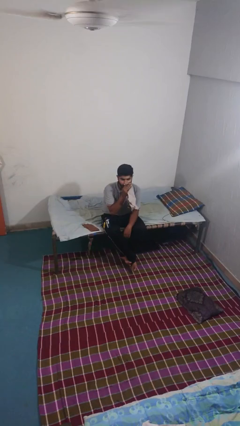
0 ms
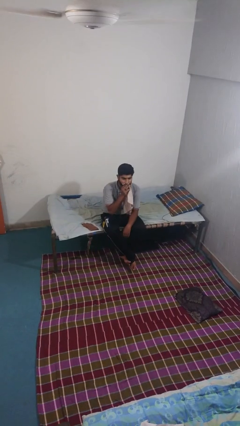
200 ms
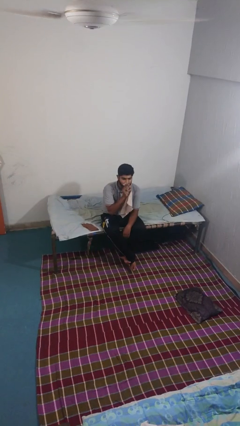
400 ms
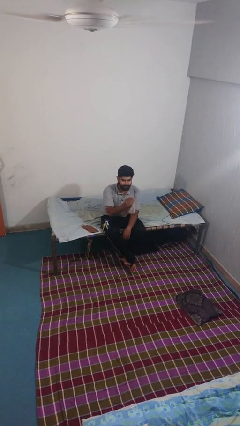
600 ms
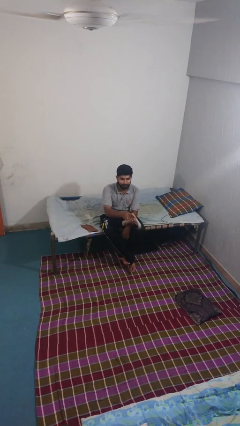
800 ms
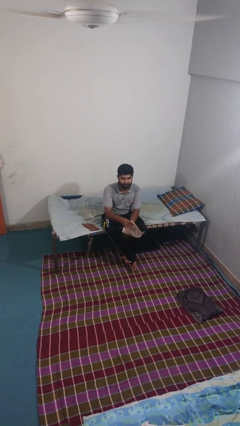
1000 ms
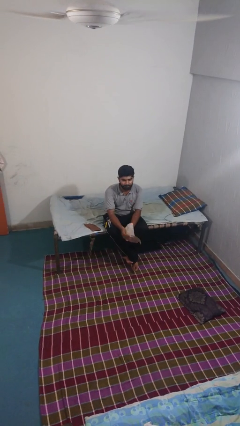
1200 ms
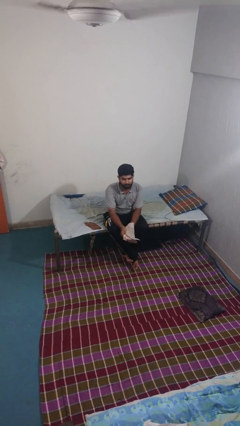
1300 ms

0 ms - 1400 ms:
person wipes mouth with napkin

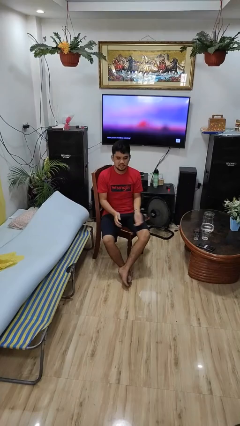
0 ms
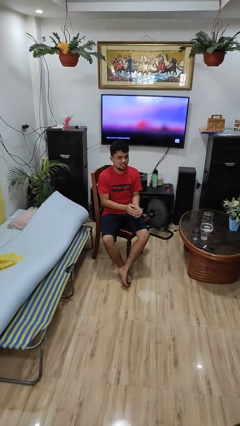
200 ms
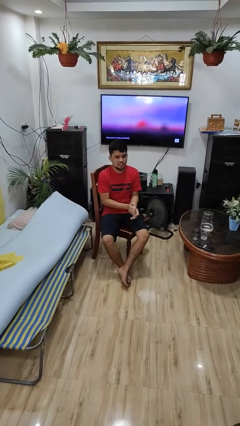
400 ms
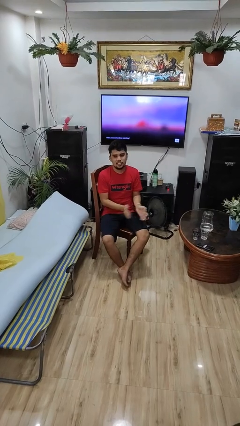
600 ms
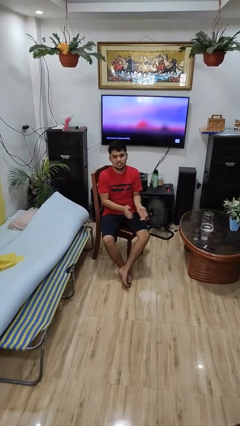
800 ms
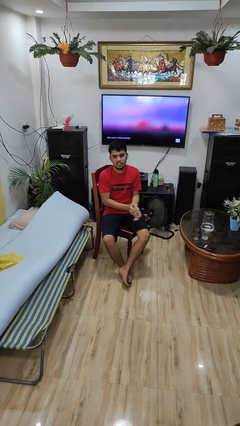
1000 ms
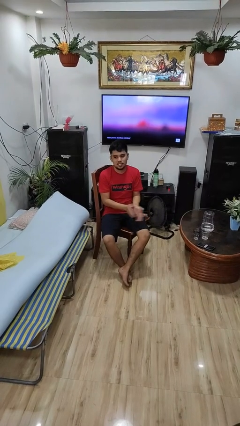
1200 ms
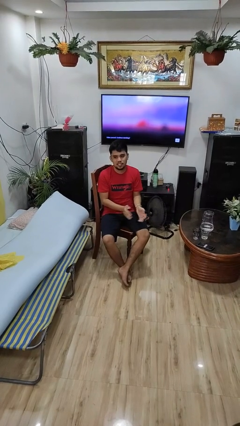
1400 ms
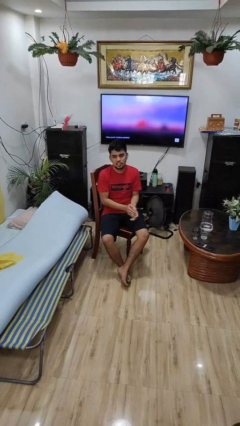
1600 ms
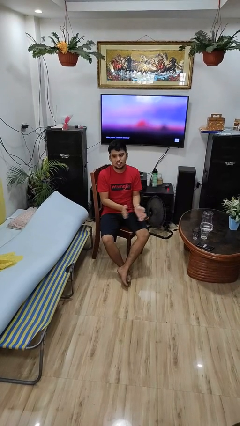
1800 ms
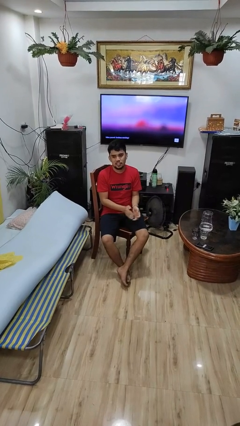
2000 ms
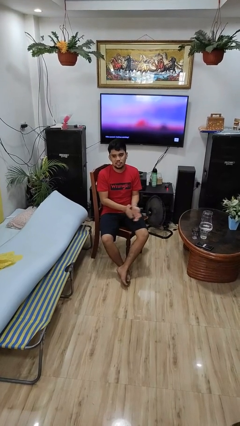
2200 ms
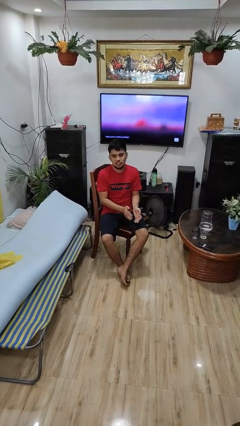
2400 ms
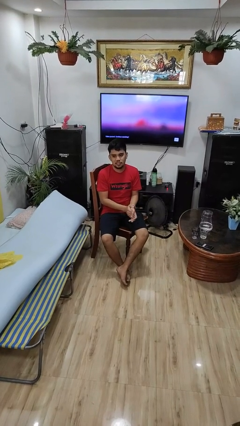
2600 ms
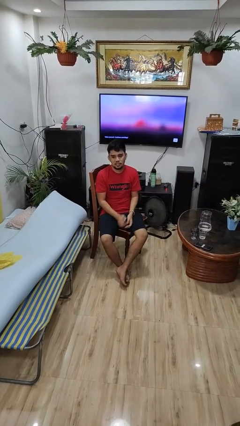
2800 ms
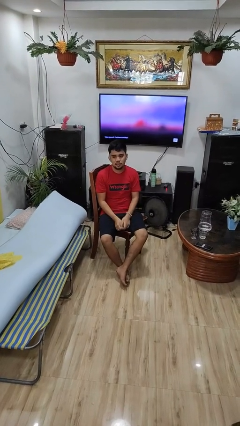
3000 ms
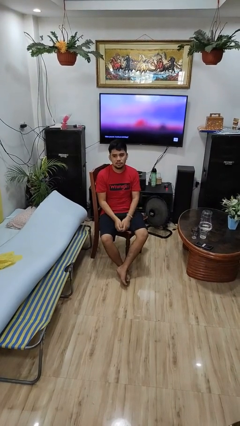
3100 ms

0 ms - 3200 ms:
person claps hands

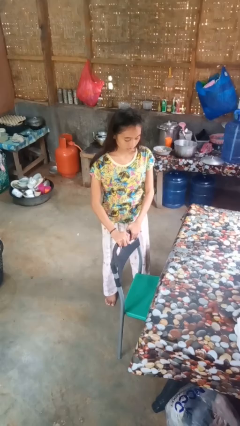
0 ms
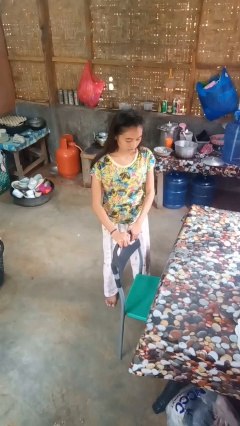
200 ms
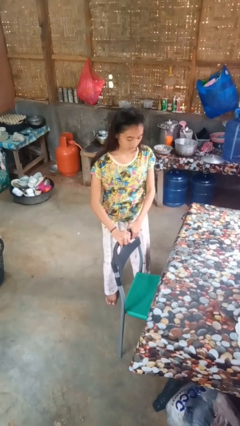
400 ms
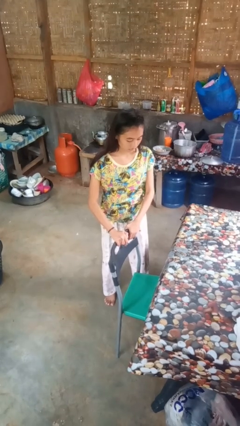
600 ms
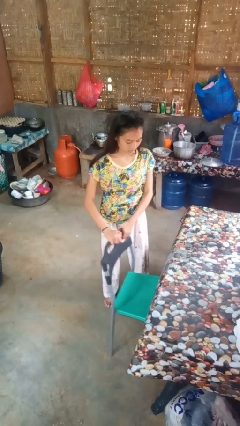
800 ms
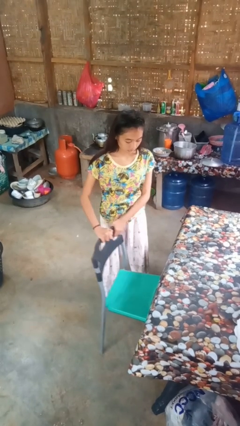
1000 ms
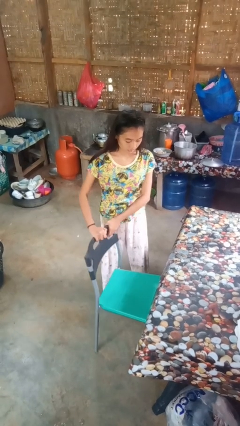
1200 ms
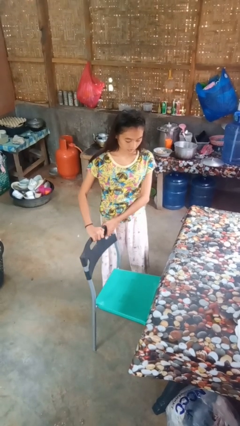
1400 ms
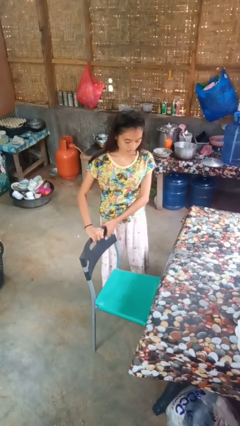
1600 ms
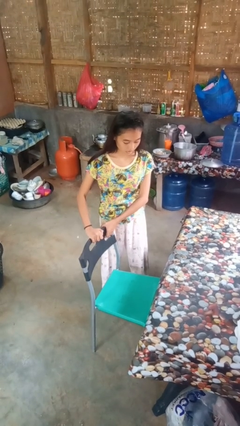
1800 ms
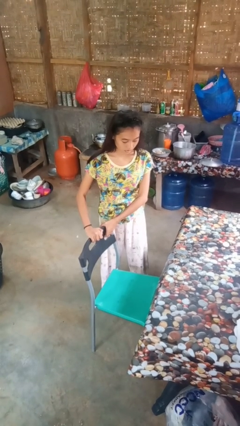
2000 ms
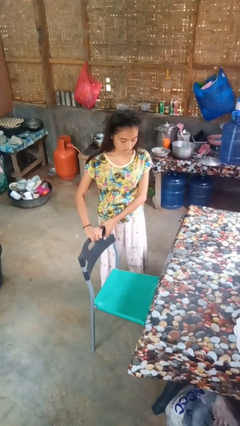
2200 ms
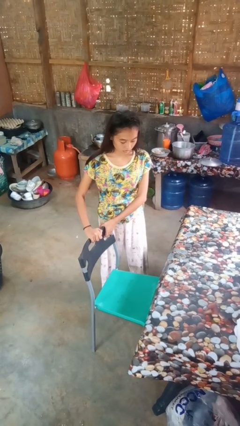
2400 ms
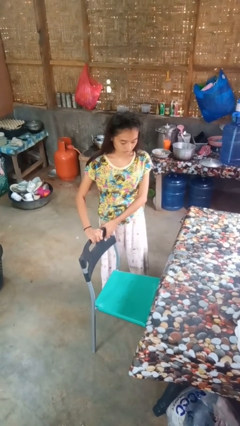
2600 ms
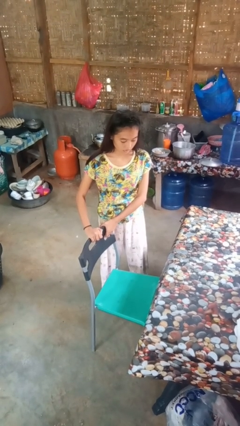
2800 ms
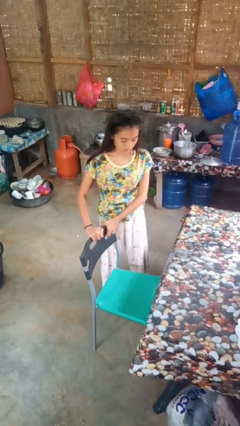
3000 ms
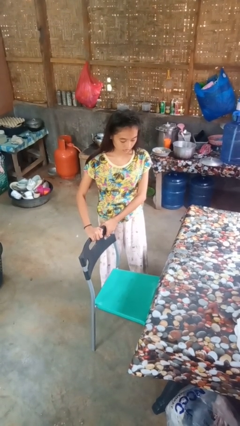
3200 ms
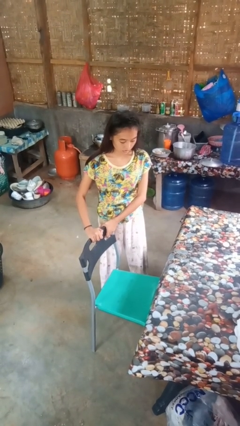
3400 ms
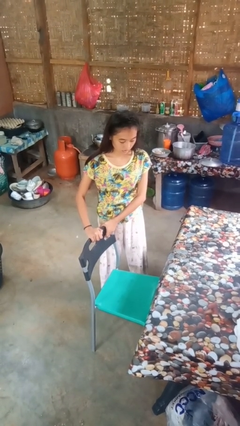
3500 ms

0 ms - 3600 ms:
person pulls out chair

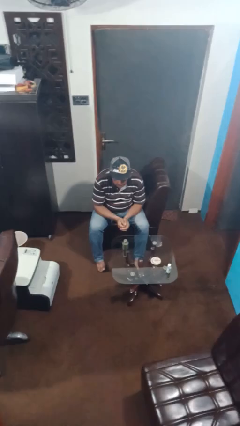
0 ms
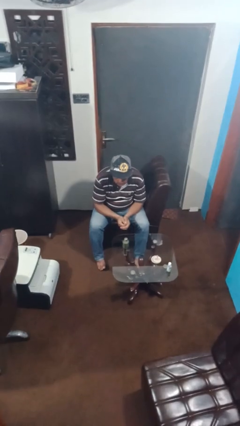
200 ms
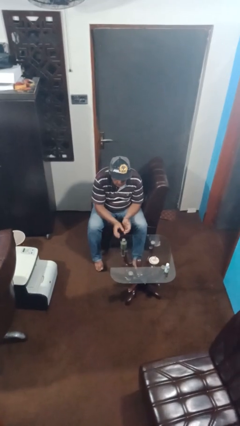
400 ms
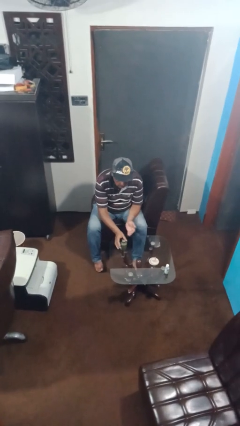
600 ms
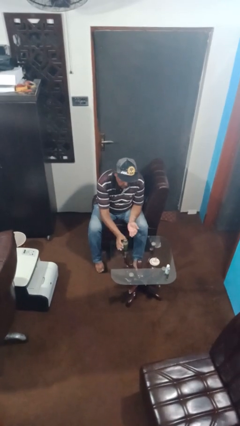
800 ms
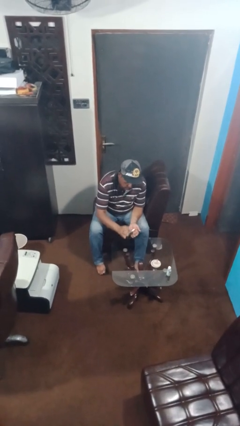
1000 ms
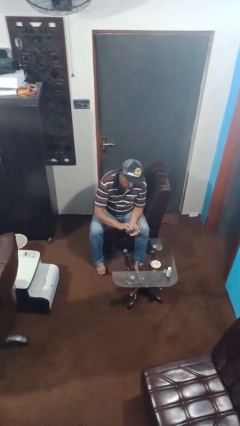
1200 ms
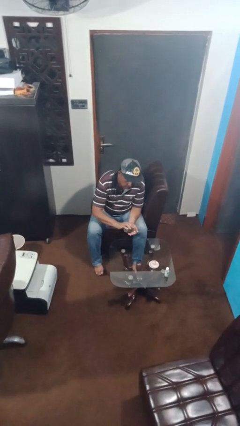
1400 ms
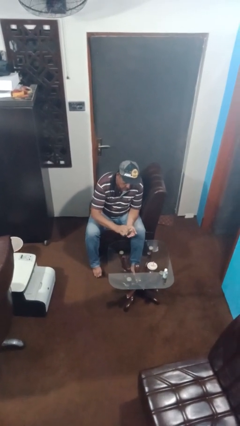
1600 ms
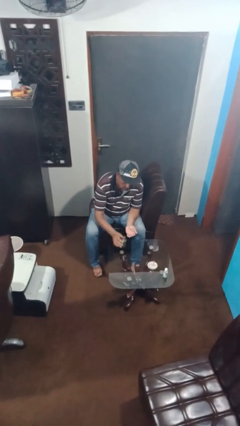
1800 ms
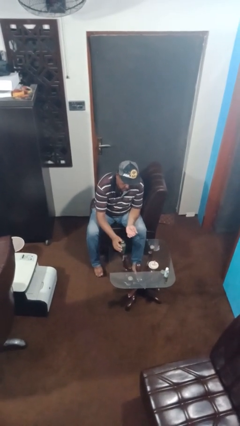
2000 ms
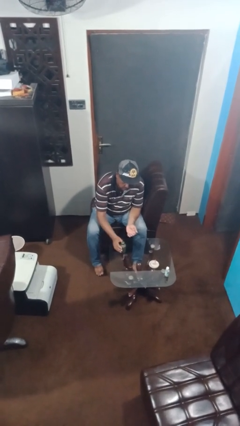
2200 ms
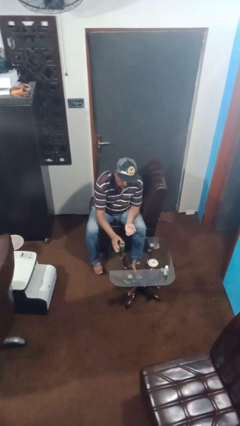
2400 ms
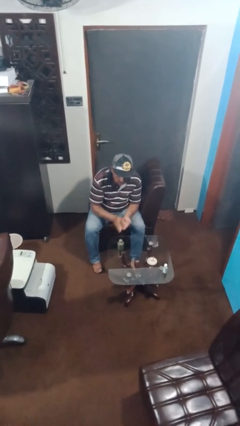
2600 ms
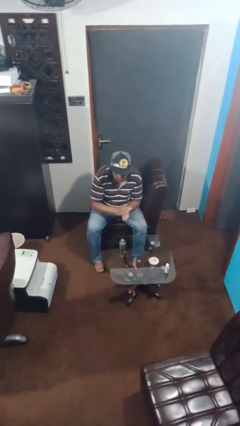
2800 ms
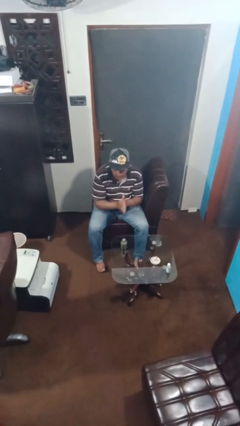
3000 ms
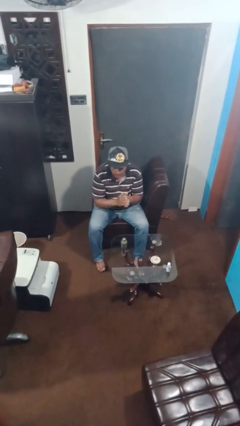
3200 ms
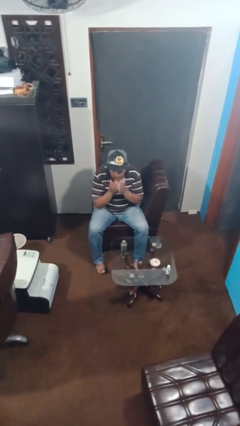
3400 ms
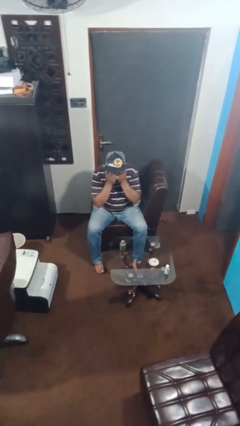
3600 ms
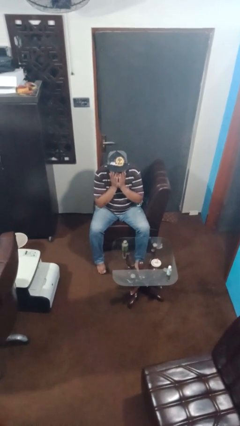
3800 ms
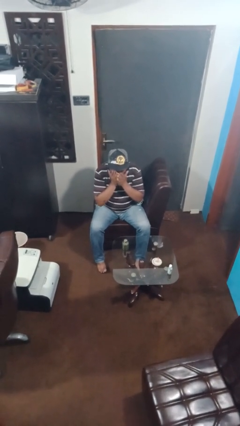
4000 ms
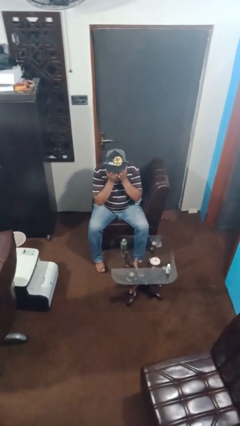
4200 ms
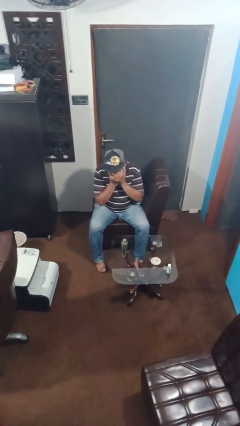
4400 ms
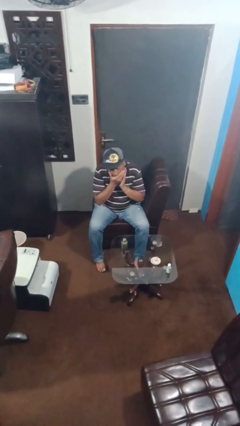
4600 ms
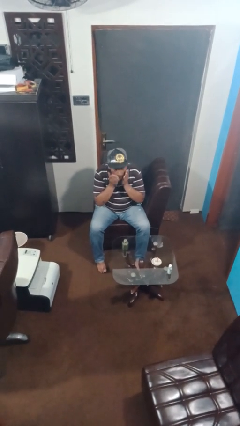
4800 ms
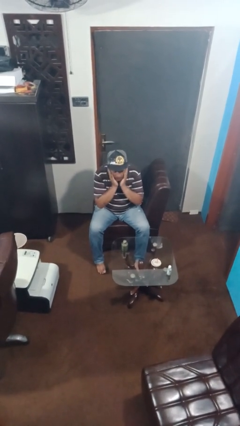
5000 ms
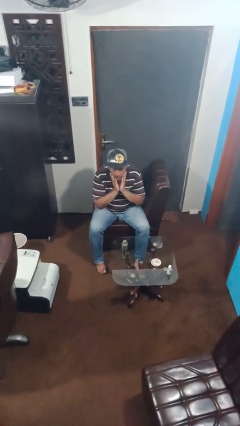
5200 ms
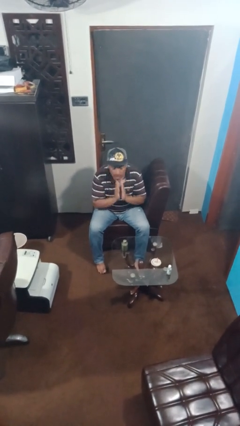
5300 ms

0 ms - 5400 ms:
person applies facial moisturizer

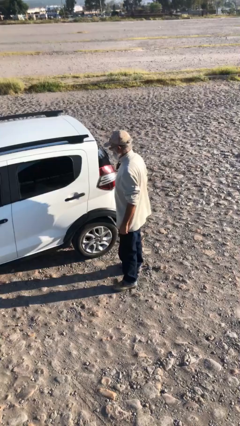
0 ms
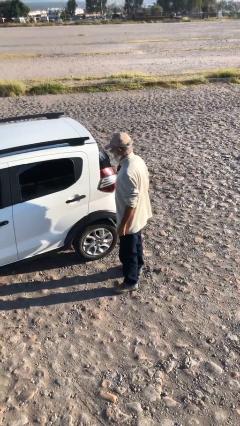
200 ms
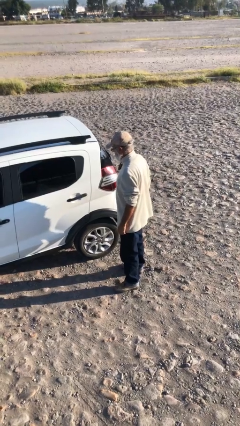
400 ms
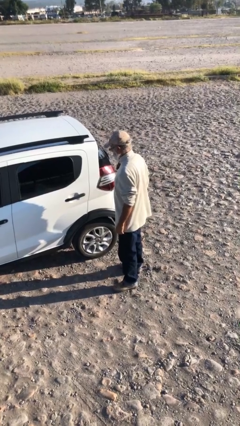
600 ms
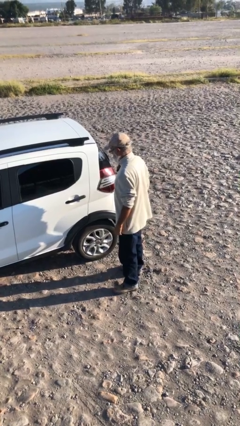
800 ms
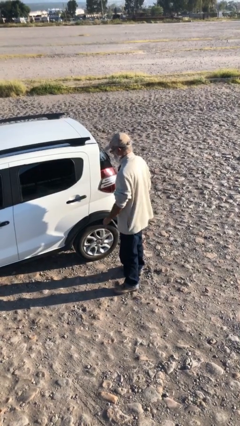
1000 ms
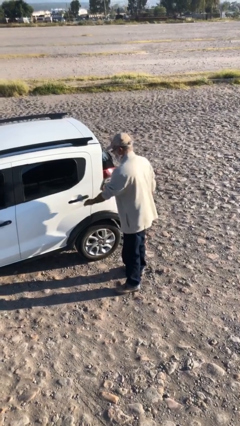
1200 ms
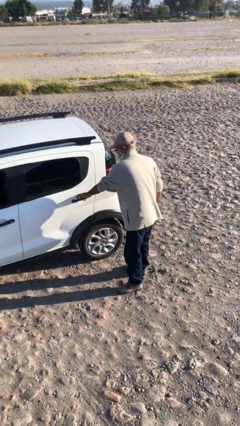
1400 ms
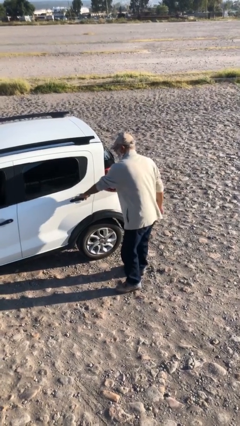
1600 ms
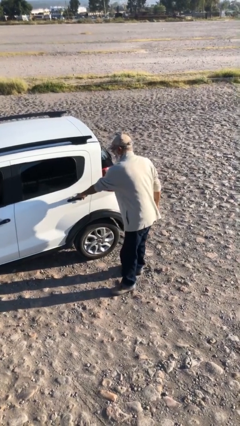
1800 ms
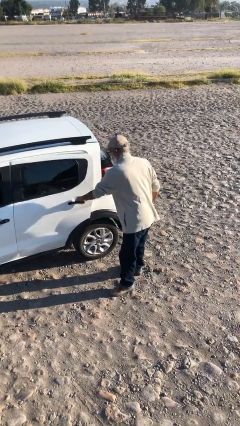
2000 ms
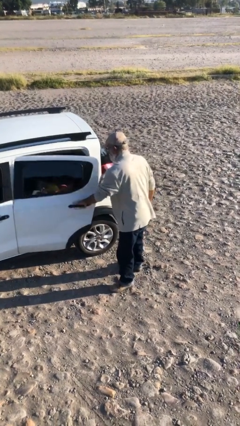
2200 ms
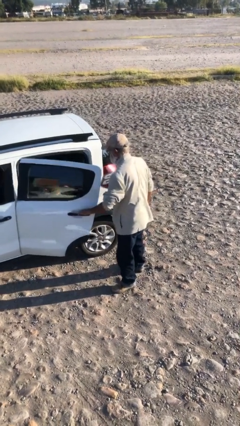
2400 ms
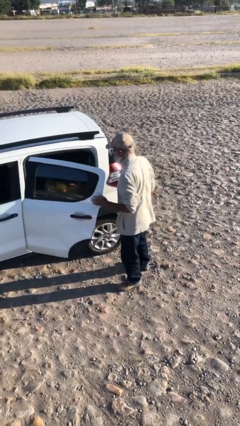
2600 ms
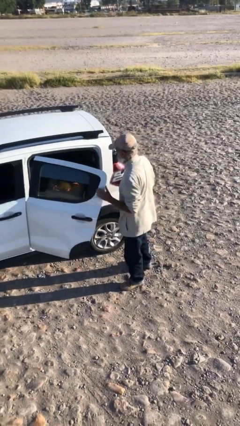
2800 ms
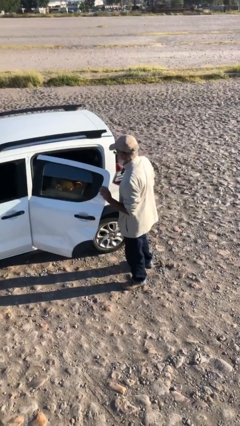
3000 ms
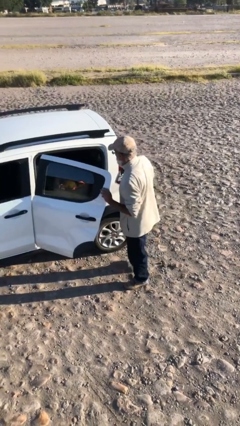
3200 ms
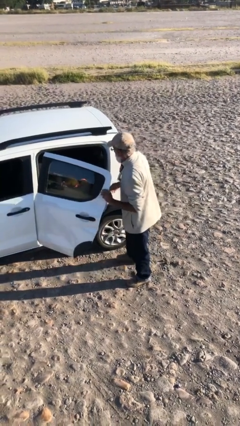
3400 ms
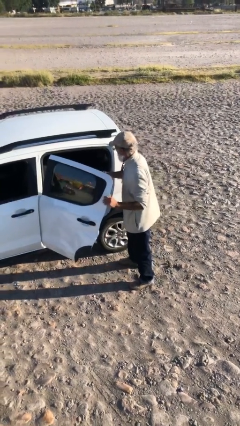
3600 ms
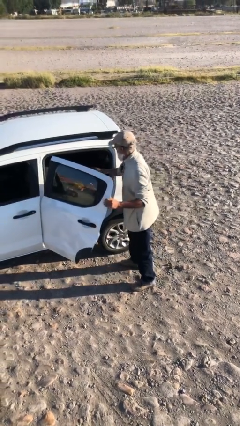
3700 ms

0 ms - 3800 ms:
person opens car door

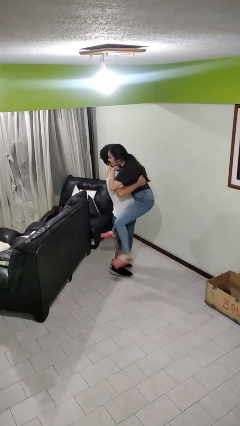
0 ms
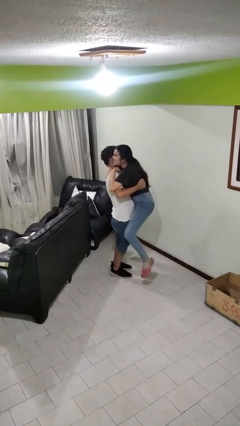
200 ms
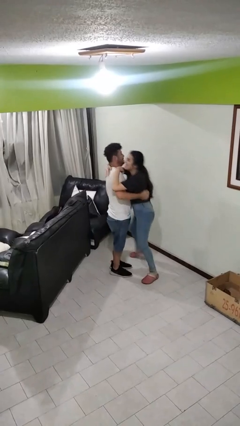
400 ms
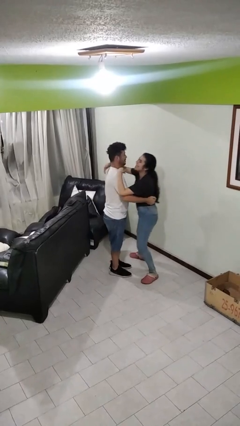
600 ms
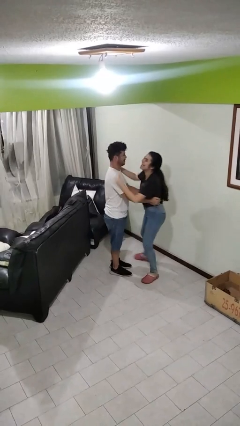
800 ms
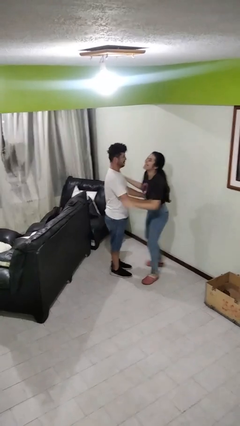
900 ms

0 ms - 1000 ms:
person puts down person
